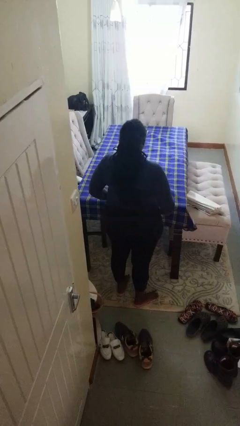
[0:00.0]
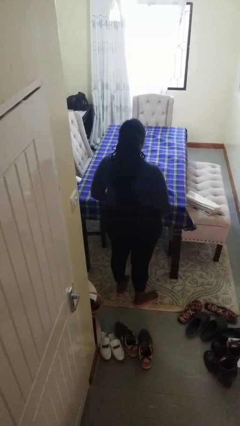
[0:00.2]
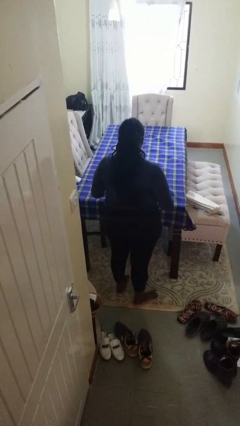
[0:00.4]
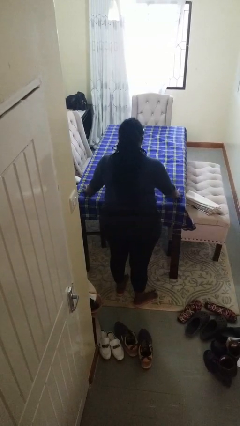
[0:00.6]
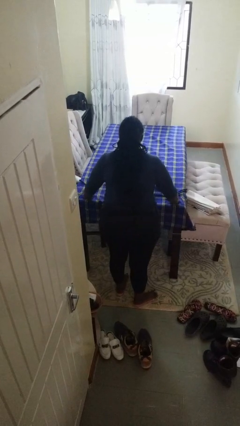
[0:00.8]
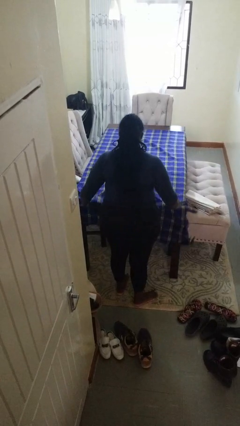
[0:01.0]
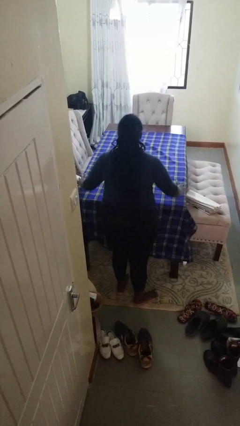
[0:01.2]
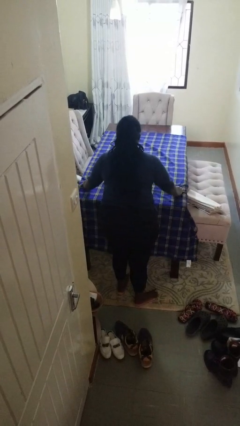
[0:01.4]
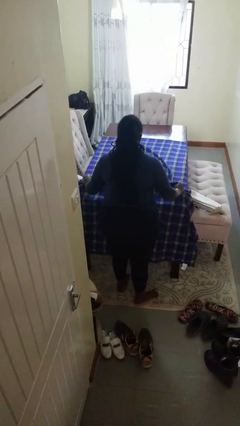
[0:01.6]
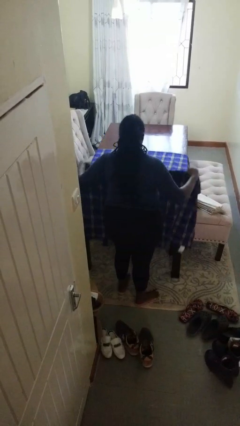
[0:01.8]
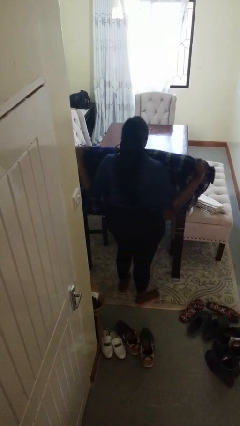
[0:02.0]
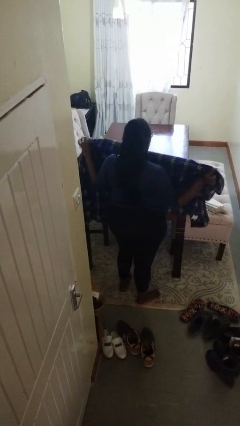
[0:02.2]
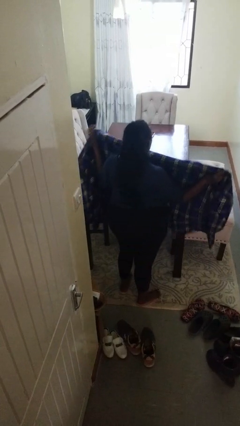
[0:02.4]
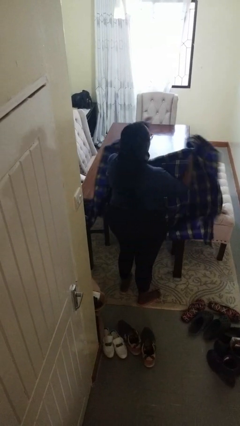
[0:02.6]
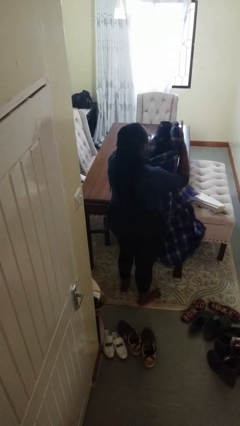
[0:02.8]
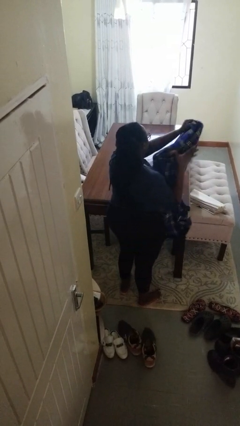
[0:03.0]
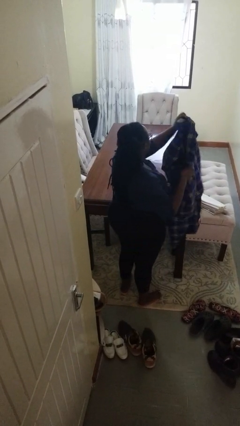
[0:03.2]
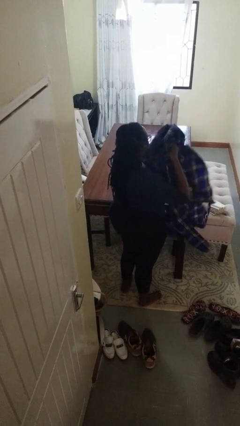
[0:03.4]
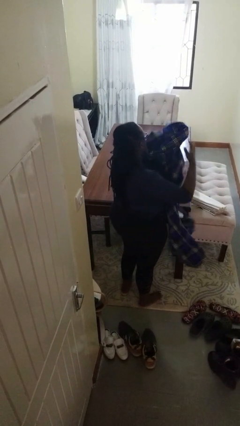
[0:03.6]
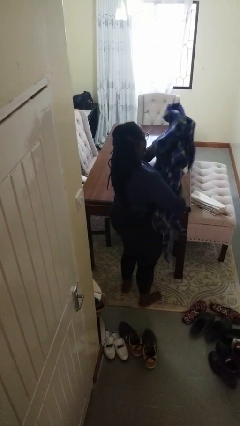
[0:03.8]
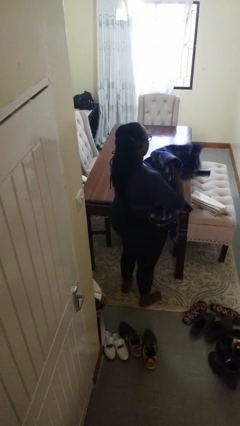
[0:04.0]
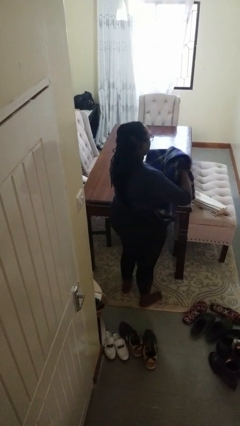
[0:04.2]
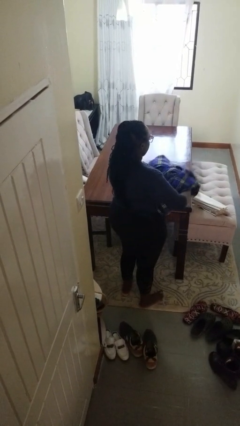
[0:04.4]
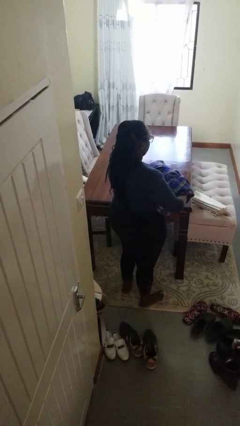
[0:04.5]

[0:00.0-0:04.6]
person folds tablecloth

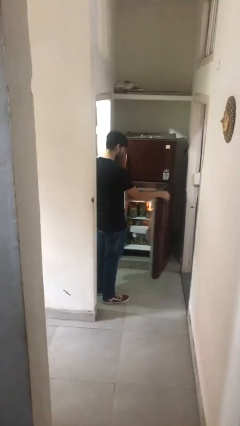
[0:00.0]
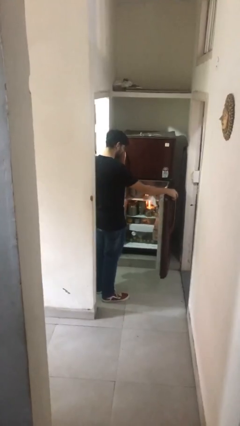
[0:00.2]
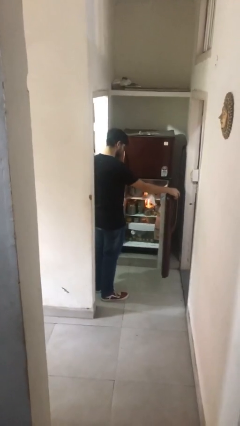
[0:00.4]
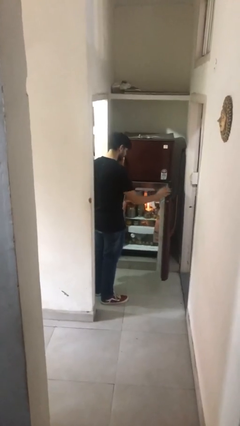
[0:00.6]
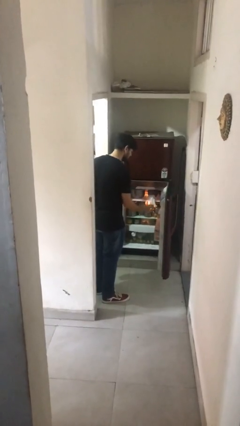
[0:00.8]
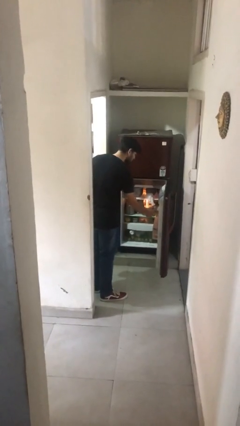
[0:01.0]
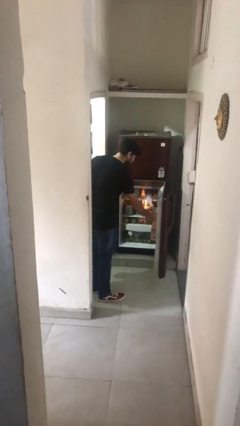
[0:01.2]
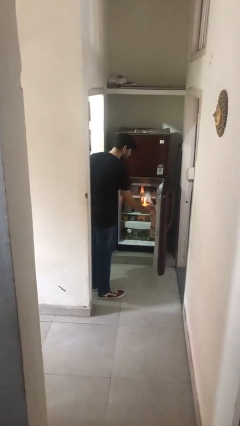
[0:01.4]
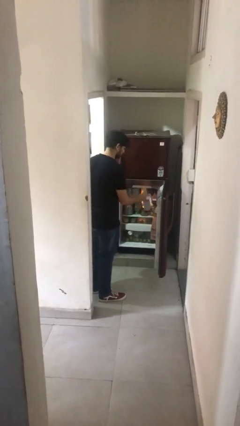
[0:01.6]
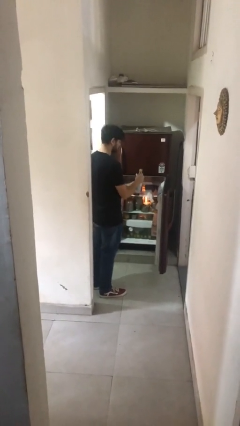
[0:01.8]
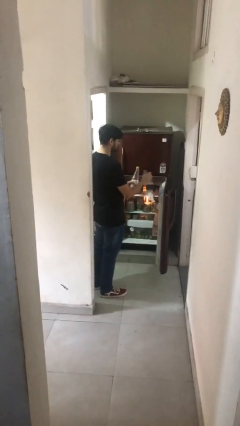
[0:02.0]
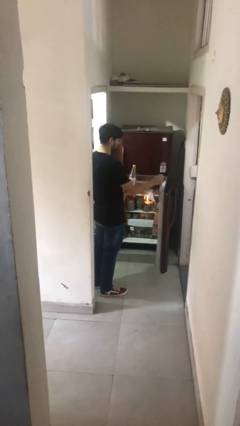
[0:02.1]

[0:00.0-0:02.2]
person takes object from refrigerator

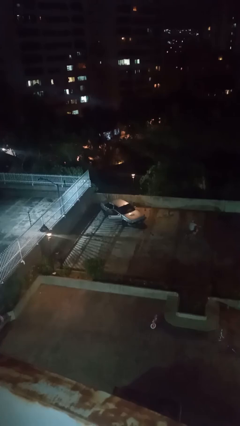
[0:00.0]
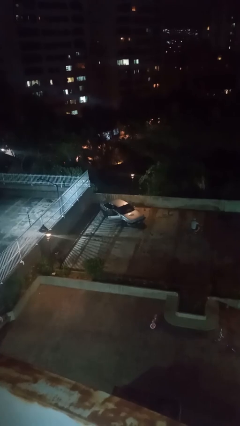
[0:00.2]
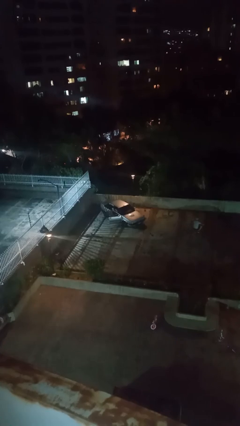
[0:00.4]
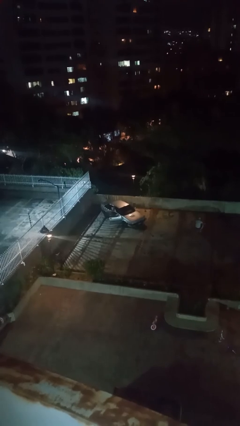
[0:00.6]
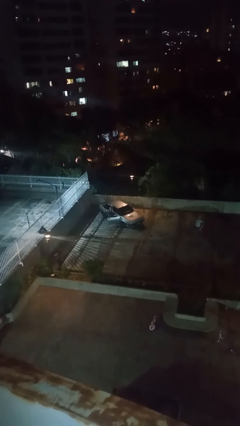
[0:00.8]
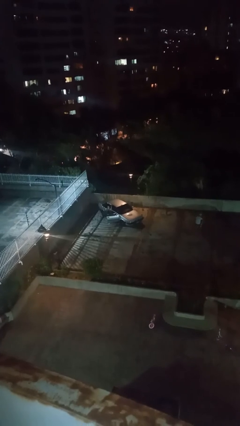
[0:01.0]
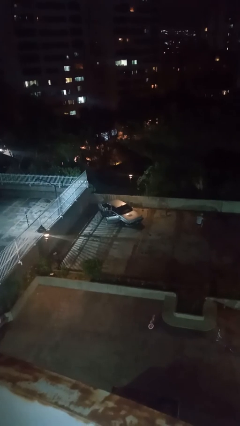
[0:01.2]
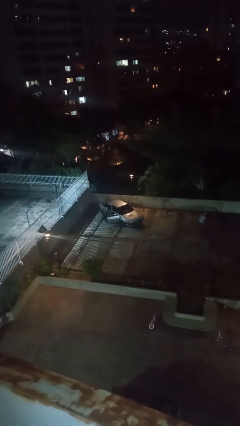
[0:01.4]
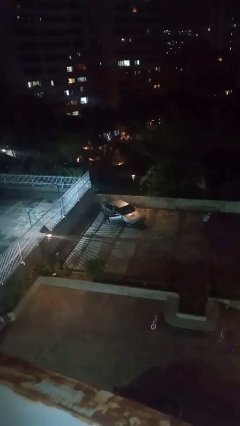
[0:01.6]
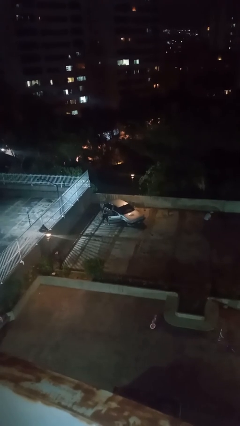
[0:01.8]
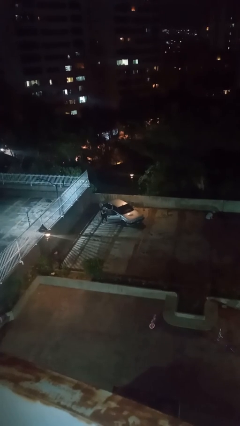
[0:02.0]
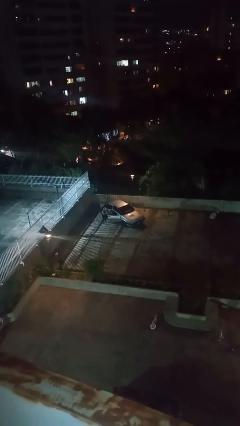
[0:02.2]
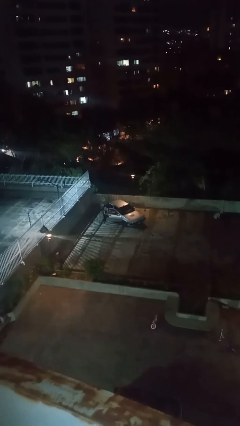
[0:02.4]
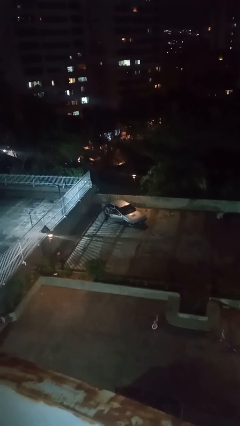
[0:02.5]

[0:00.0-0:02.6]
car drops off person

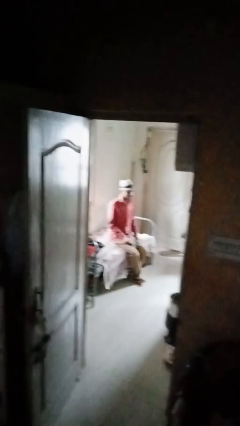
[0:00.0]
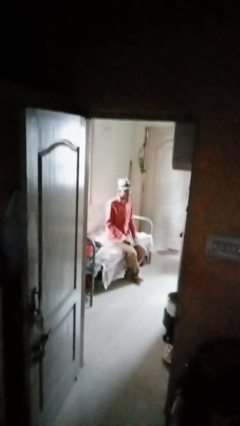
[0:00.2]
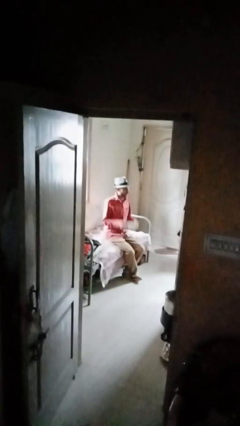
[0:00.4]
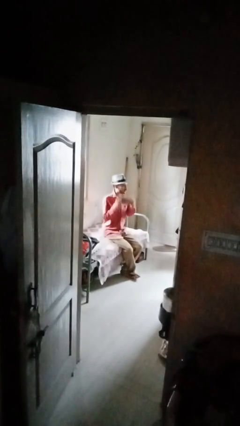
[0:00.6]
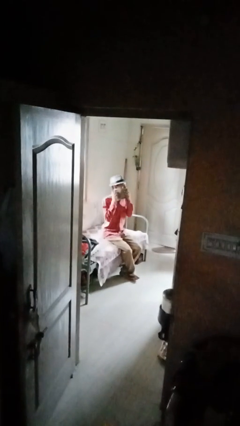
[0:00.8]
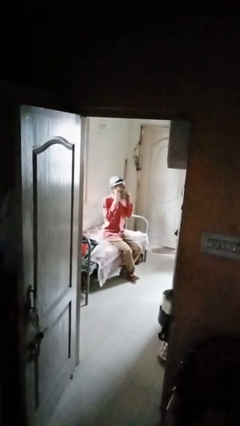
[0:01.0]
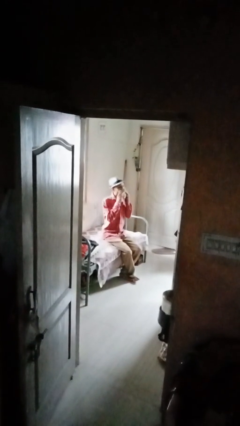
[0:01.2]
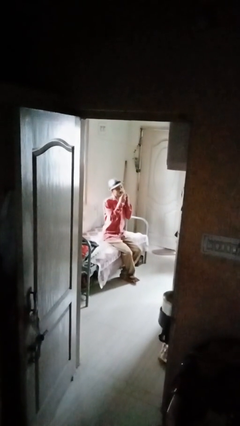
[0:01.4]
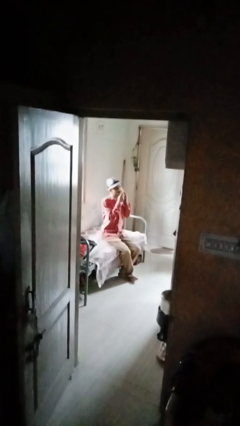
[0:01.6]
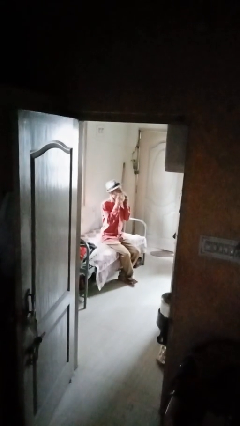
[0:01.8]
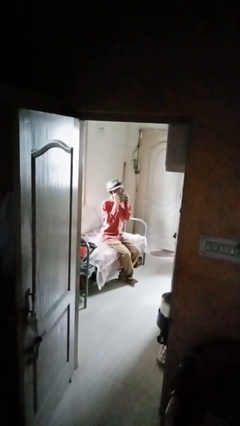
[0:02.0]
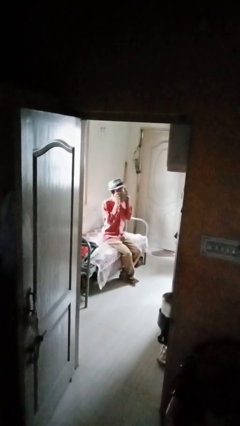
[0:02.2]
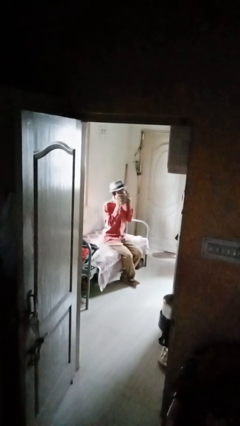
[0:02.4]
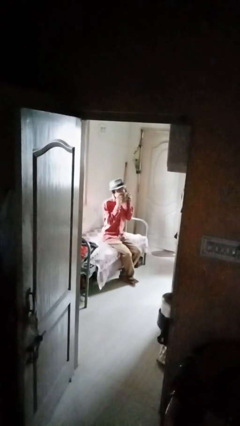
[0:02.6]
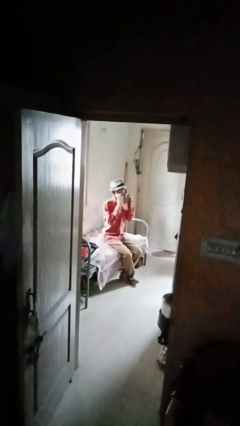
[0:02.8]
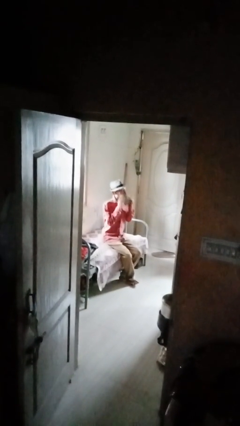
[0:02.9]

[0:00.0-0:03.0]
person wipes mouth with napkin

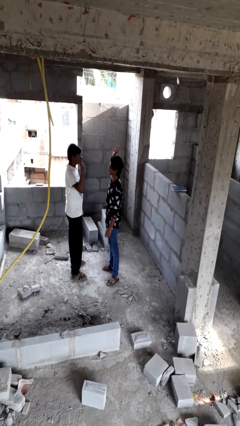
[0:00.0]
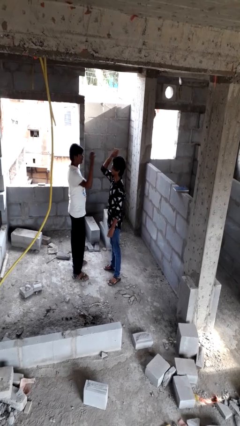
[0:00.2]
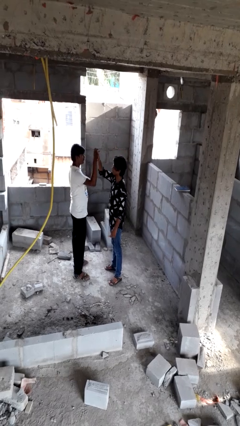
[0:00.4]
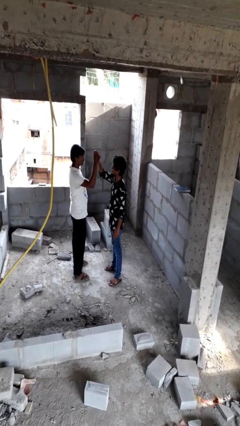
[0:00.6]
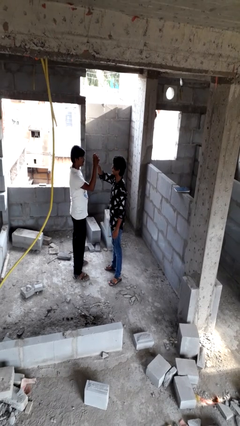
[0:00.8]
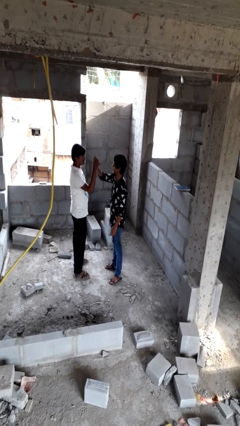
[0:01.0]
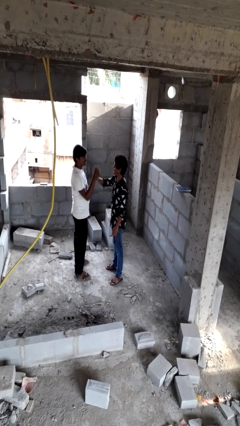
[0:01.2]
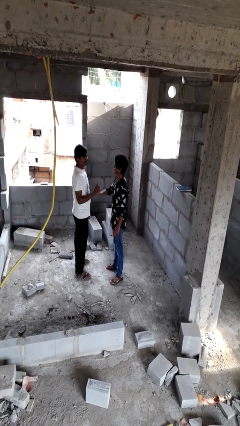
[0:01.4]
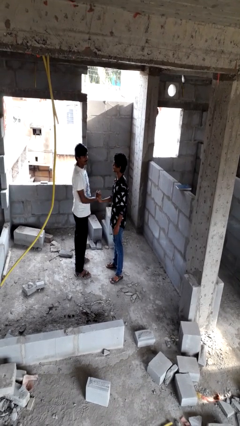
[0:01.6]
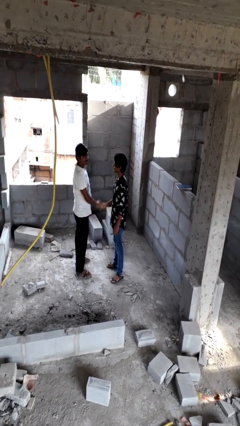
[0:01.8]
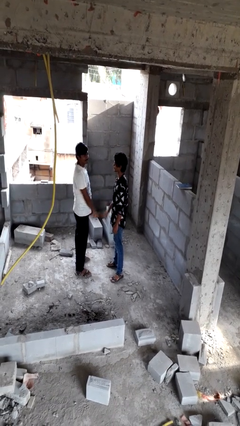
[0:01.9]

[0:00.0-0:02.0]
person highfives hand

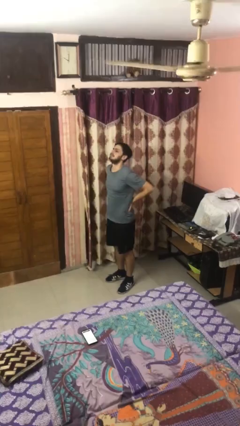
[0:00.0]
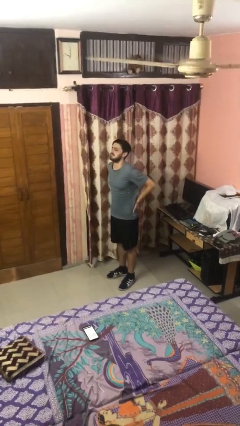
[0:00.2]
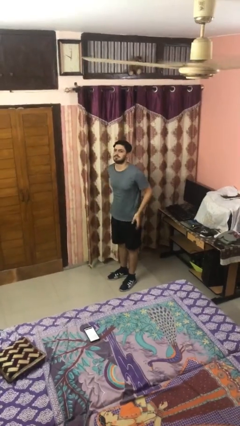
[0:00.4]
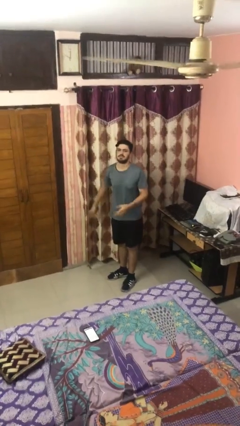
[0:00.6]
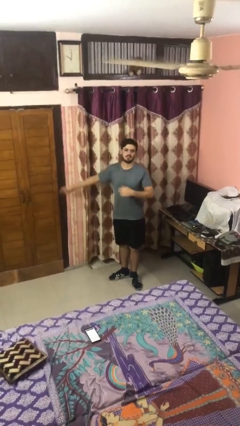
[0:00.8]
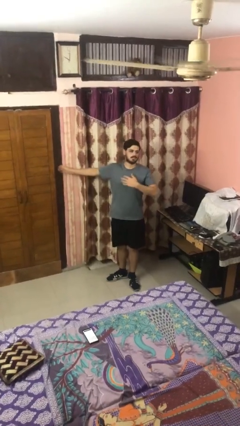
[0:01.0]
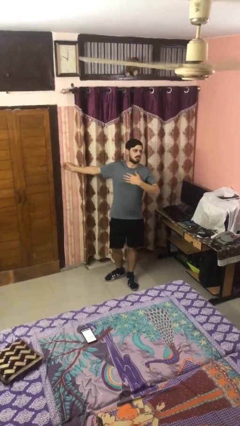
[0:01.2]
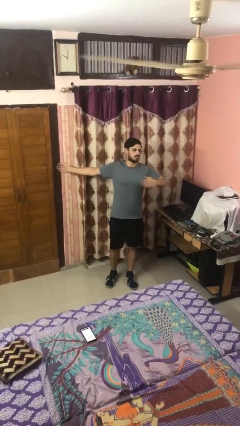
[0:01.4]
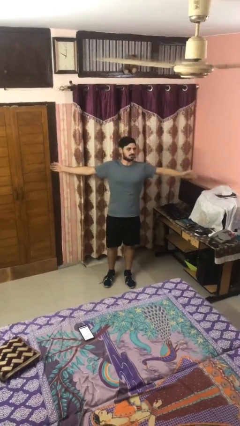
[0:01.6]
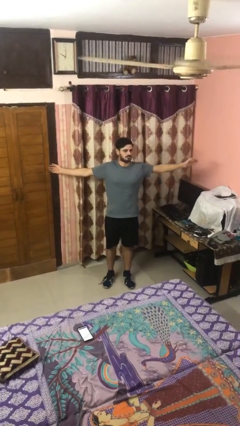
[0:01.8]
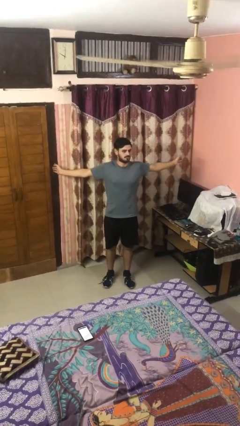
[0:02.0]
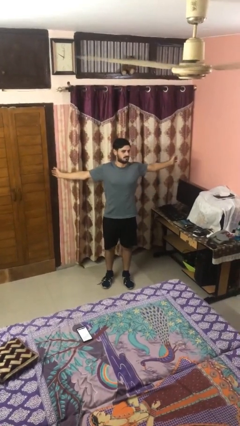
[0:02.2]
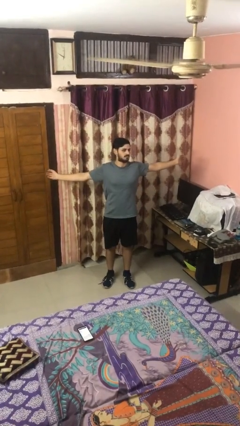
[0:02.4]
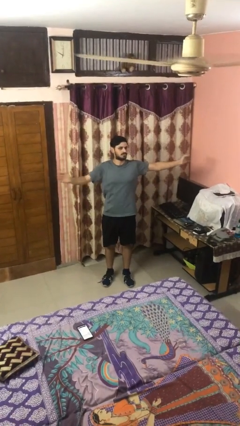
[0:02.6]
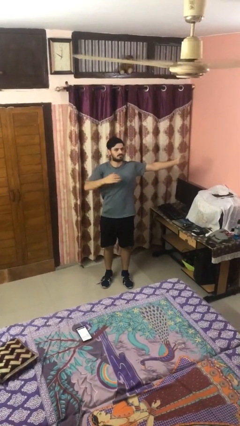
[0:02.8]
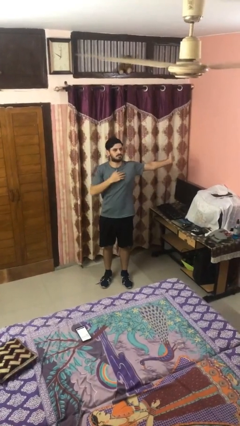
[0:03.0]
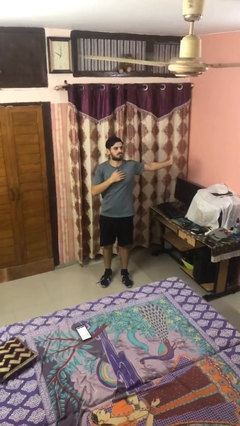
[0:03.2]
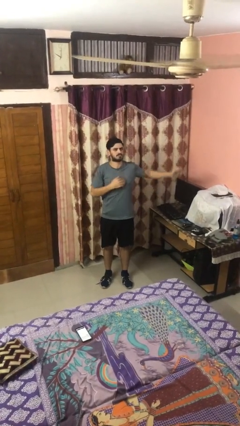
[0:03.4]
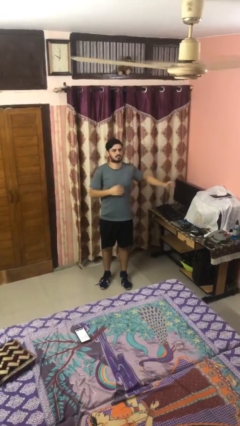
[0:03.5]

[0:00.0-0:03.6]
person stretches arms to side
